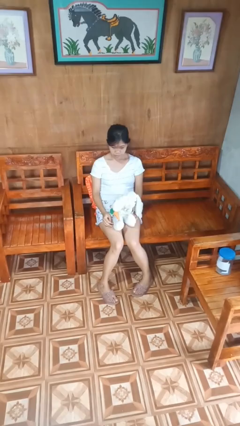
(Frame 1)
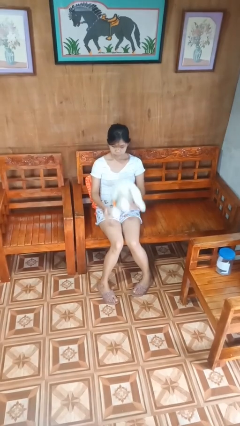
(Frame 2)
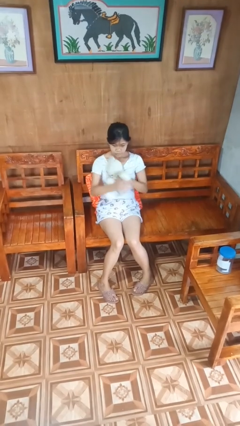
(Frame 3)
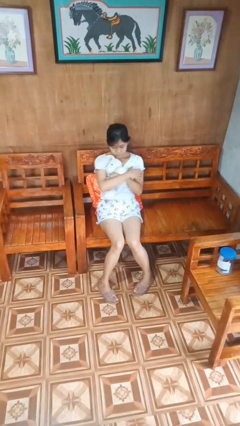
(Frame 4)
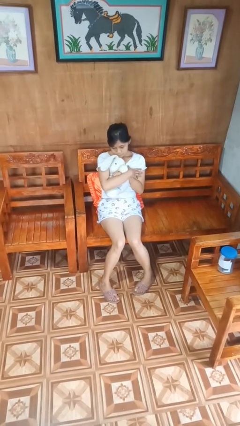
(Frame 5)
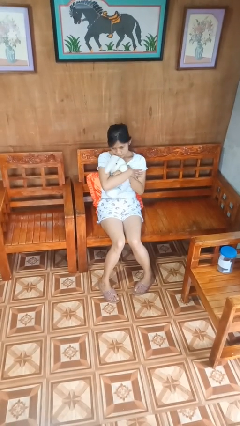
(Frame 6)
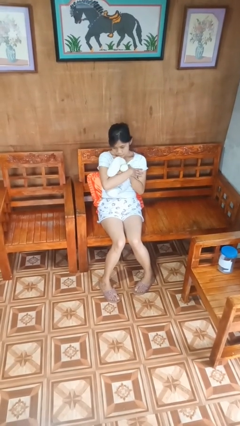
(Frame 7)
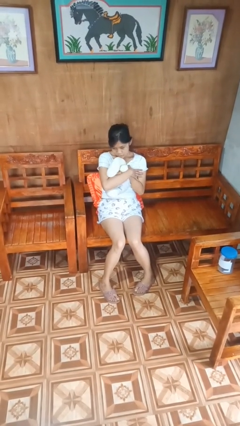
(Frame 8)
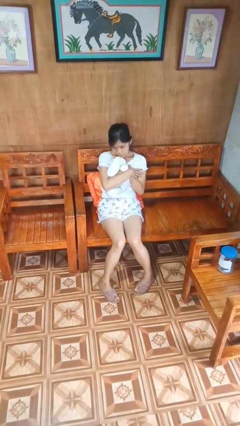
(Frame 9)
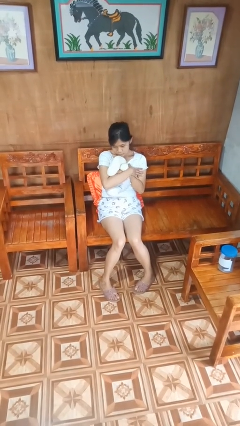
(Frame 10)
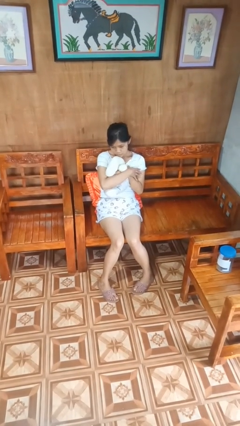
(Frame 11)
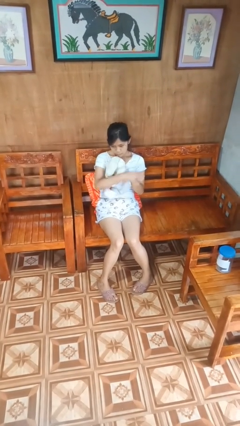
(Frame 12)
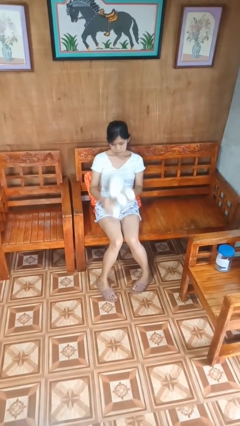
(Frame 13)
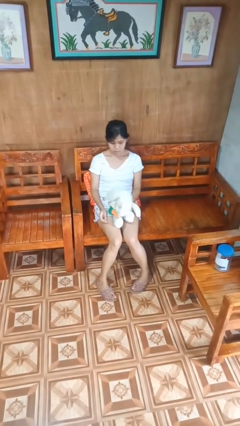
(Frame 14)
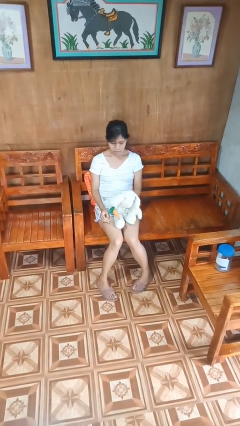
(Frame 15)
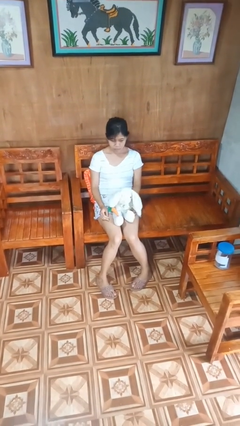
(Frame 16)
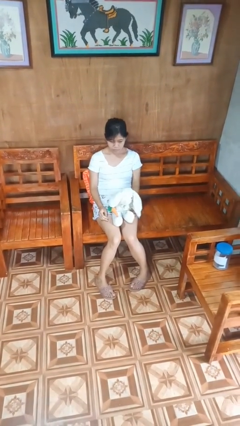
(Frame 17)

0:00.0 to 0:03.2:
person hugs stuffed animal

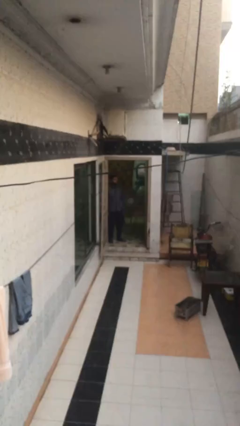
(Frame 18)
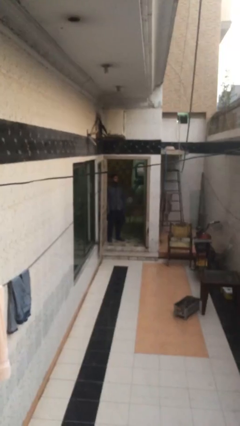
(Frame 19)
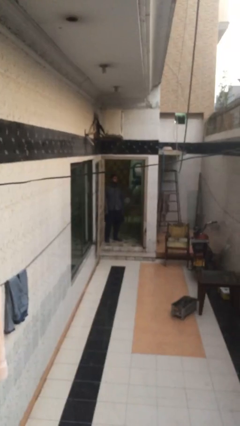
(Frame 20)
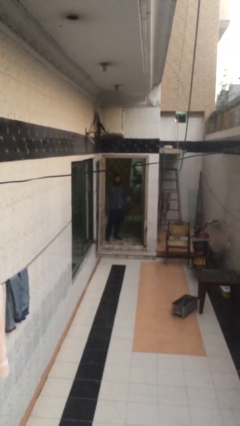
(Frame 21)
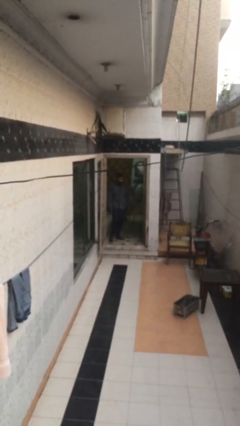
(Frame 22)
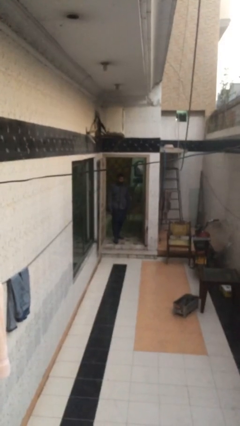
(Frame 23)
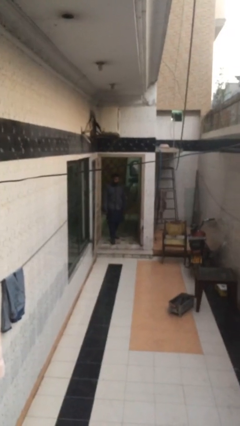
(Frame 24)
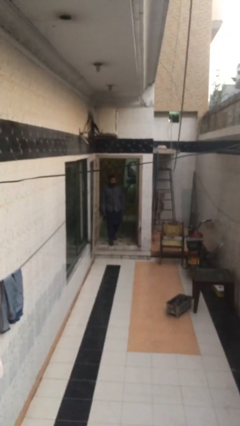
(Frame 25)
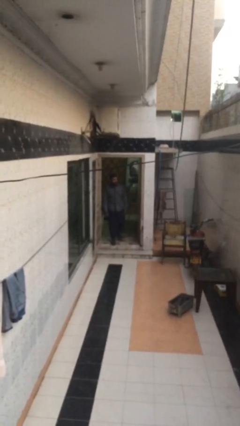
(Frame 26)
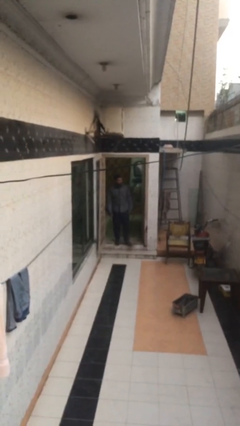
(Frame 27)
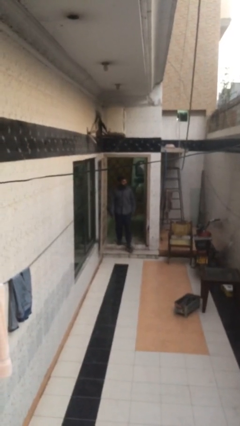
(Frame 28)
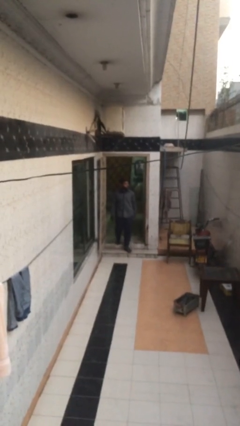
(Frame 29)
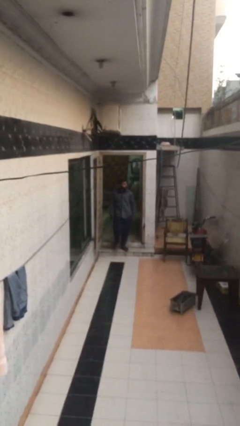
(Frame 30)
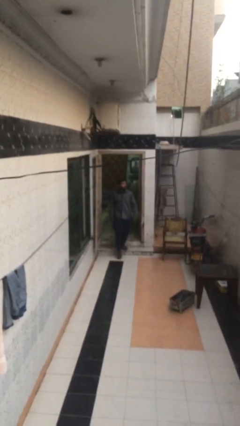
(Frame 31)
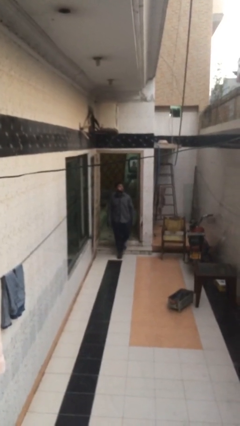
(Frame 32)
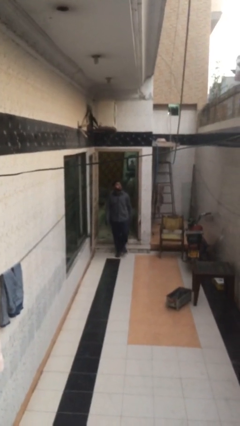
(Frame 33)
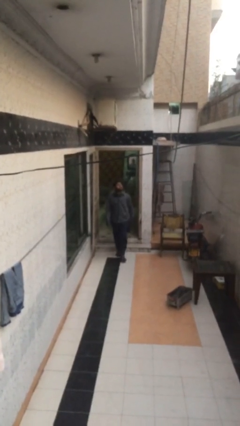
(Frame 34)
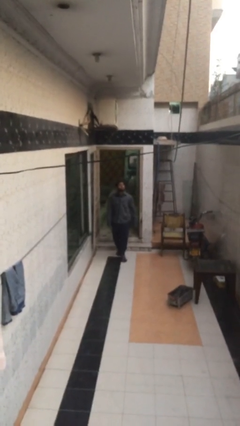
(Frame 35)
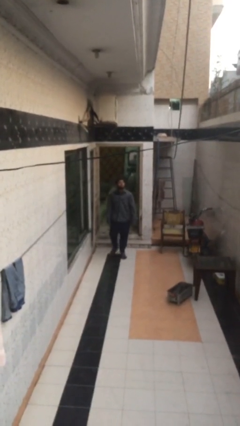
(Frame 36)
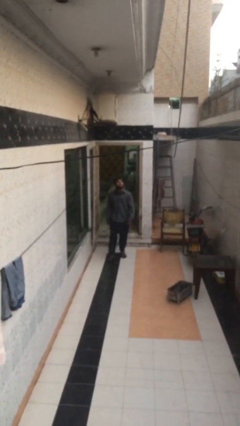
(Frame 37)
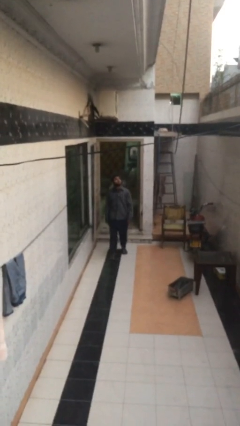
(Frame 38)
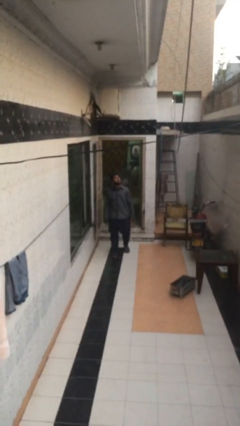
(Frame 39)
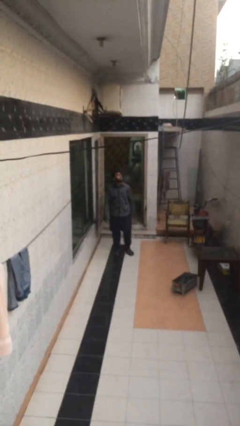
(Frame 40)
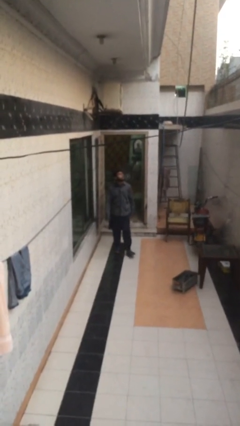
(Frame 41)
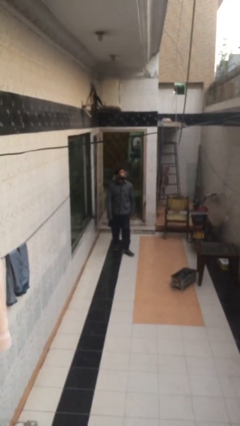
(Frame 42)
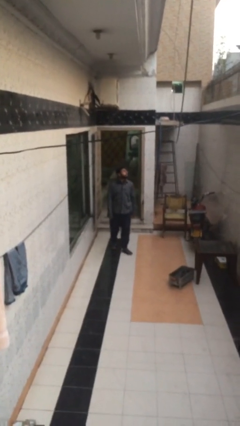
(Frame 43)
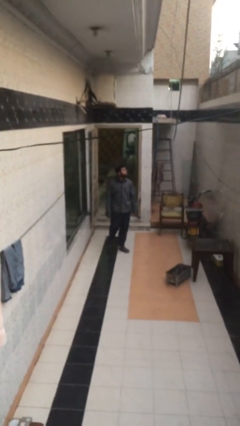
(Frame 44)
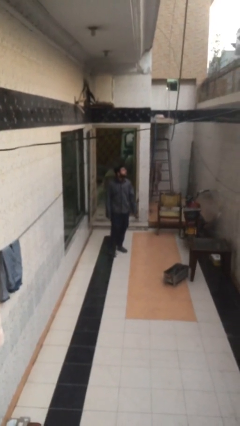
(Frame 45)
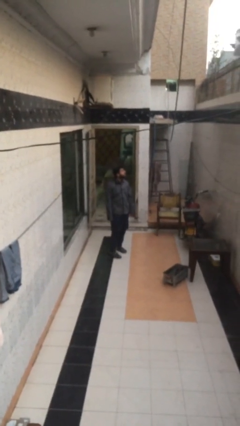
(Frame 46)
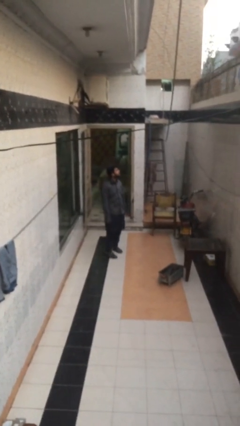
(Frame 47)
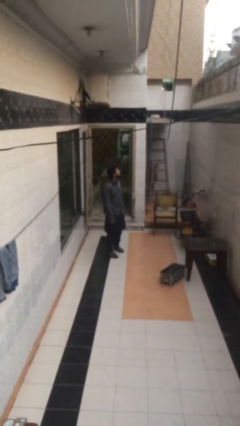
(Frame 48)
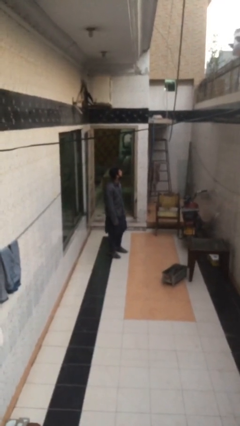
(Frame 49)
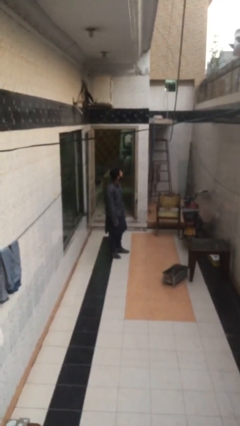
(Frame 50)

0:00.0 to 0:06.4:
person enters scene through structure

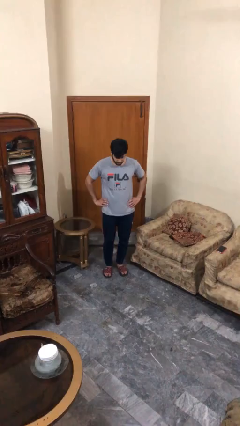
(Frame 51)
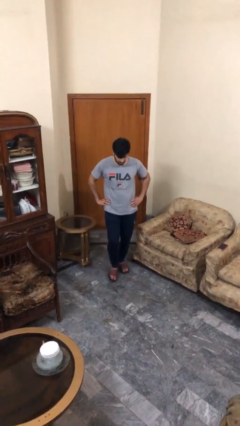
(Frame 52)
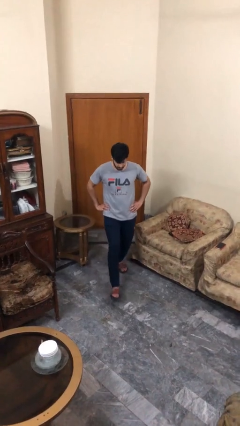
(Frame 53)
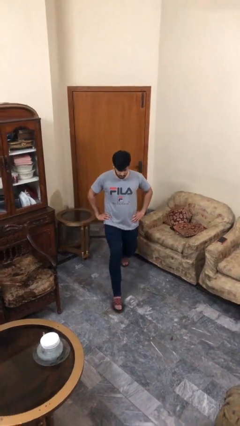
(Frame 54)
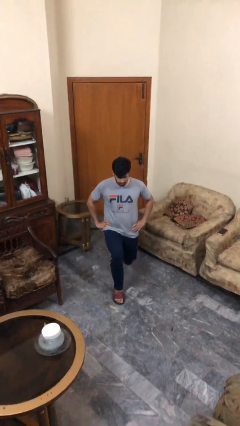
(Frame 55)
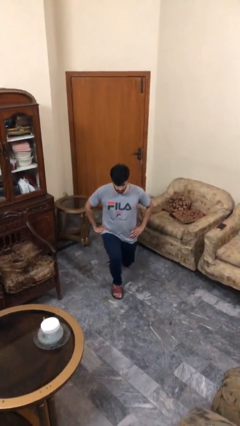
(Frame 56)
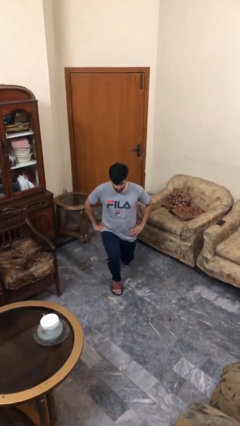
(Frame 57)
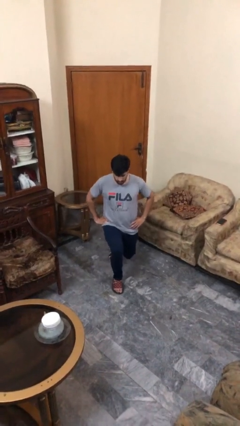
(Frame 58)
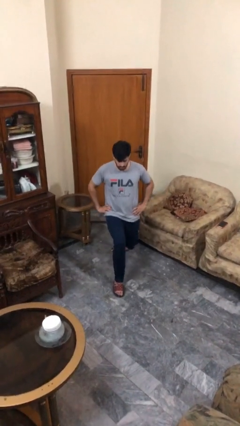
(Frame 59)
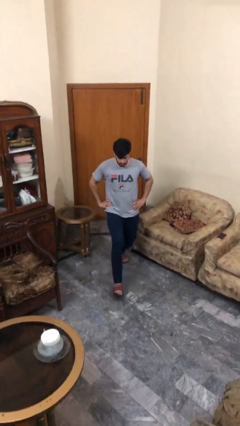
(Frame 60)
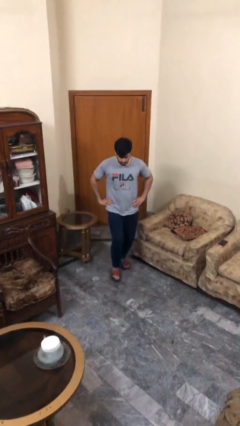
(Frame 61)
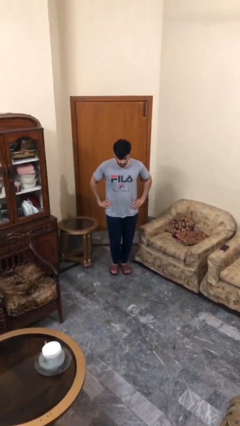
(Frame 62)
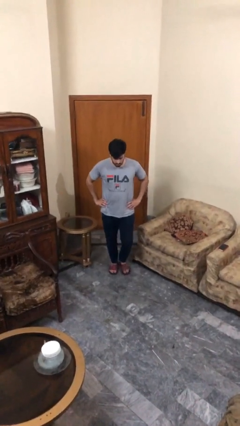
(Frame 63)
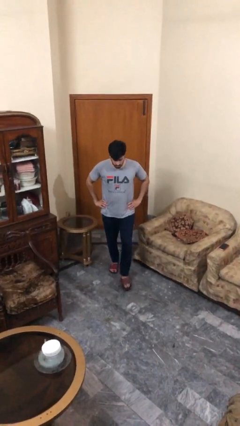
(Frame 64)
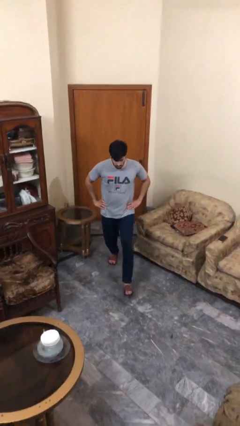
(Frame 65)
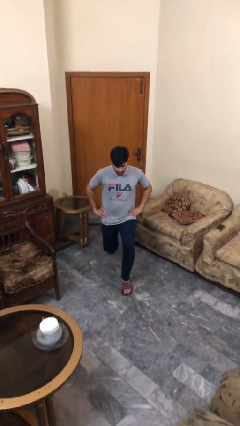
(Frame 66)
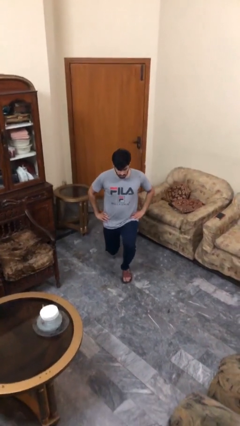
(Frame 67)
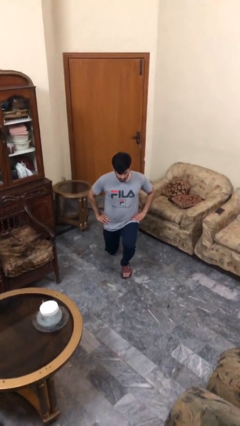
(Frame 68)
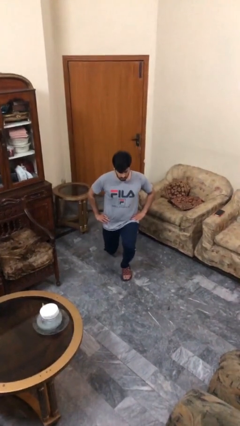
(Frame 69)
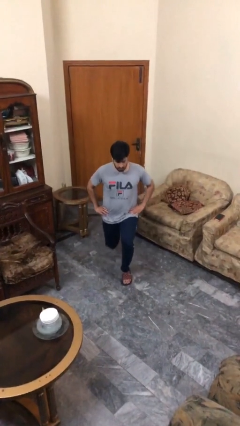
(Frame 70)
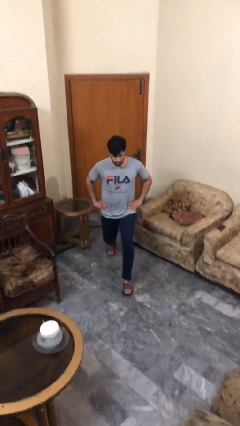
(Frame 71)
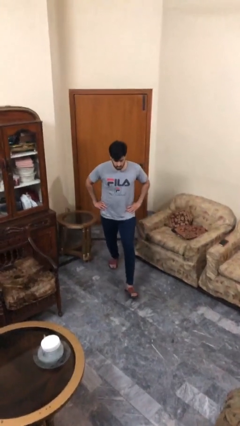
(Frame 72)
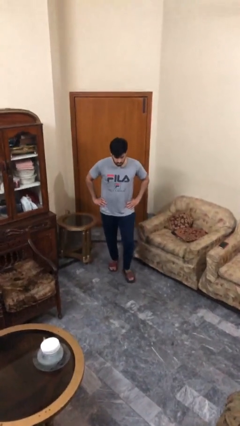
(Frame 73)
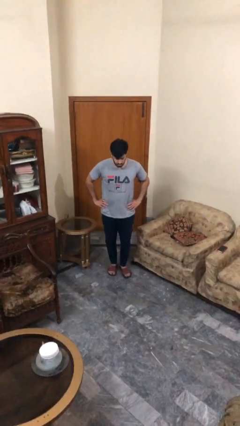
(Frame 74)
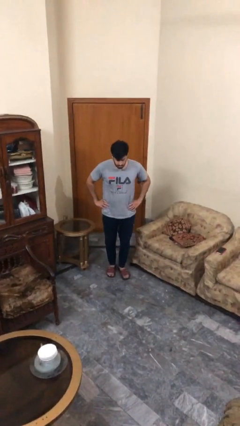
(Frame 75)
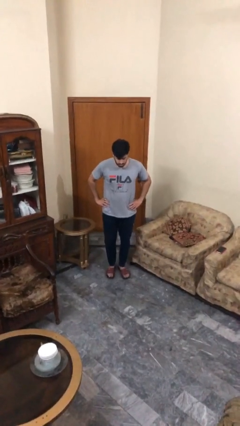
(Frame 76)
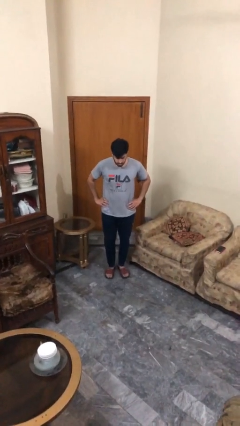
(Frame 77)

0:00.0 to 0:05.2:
person exercises with lunges

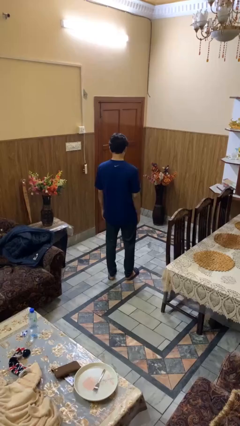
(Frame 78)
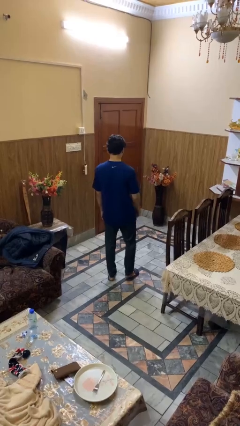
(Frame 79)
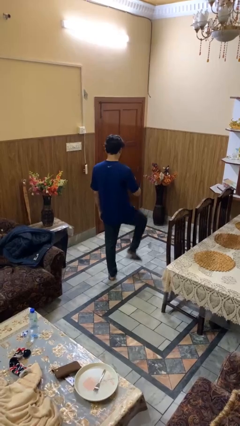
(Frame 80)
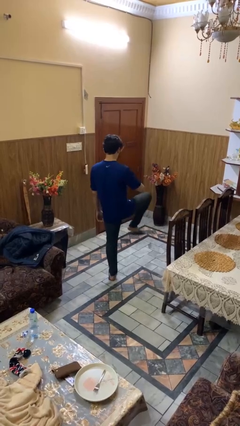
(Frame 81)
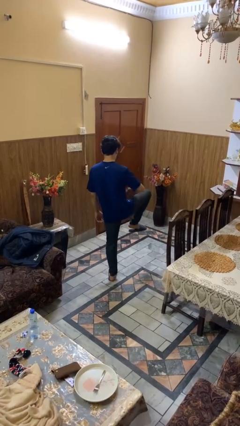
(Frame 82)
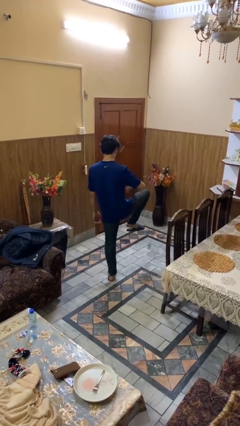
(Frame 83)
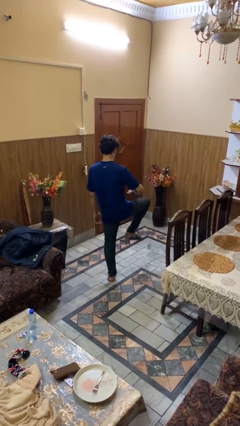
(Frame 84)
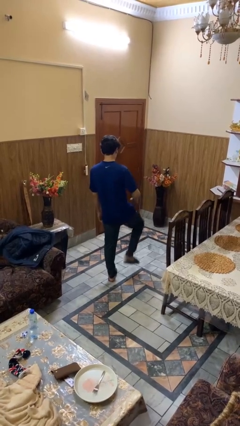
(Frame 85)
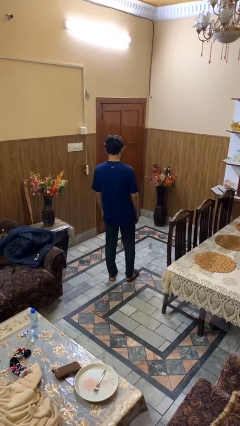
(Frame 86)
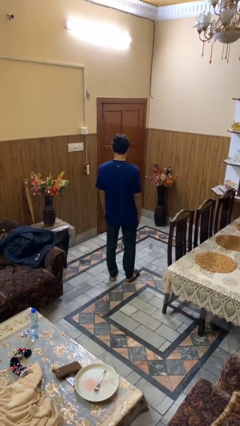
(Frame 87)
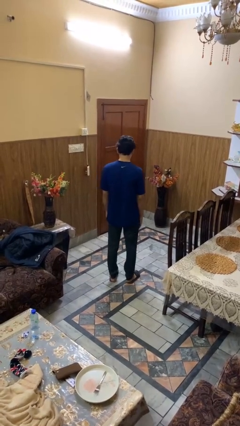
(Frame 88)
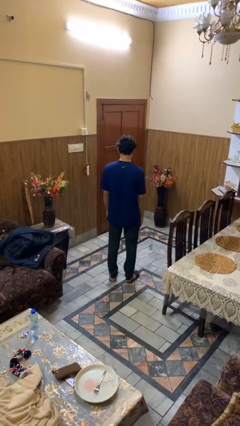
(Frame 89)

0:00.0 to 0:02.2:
person slaps hands on thighs

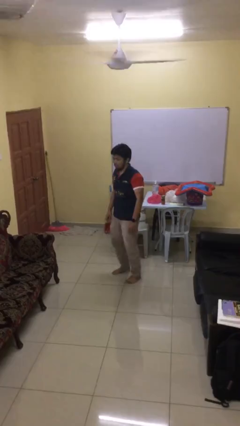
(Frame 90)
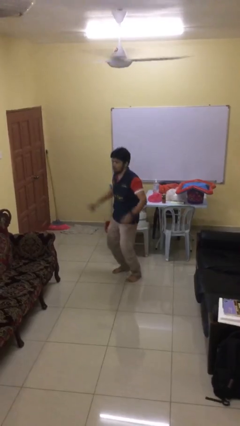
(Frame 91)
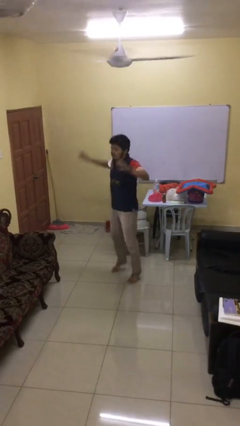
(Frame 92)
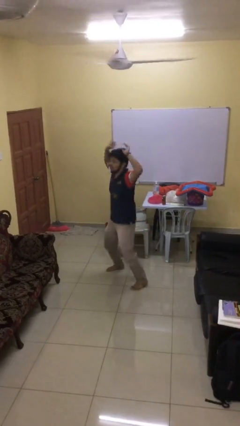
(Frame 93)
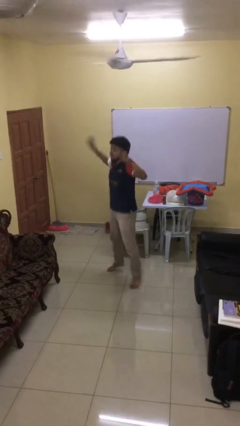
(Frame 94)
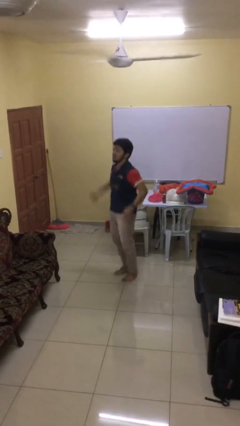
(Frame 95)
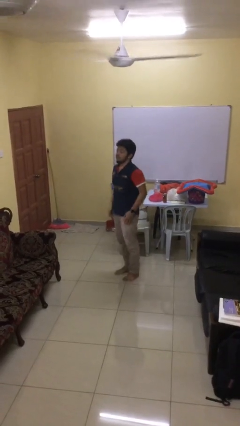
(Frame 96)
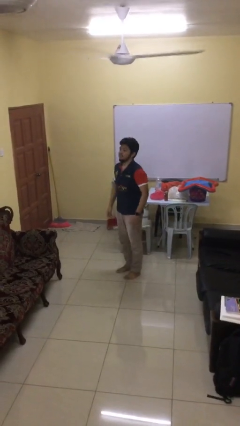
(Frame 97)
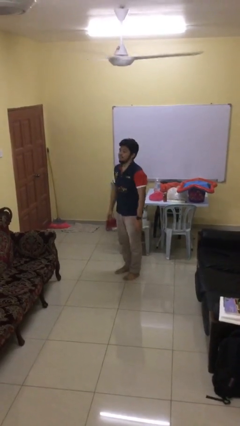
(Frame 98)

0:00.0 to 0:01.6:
person exercises with jumping jacks
